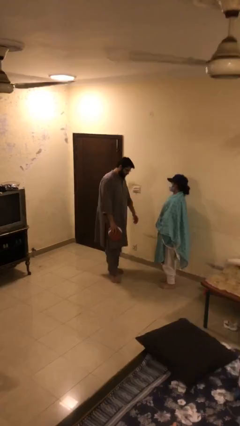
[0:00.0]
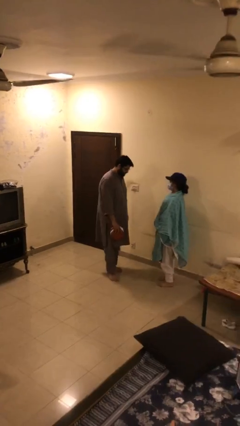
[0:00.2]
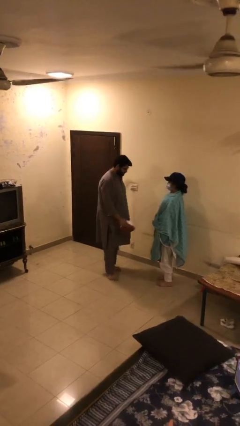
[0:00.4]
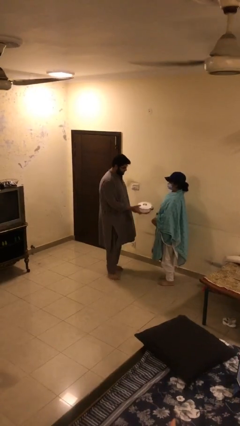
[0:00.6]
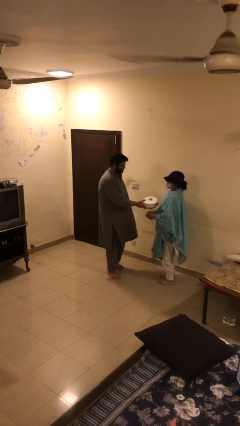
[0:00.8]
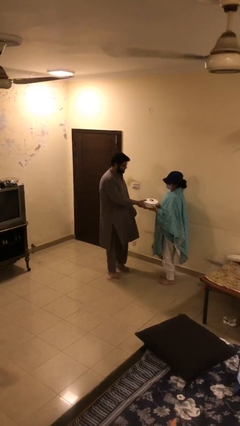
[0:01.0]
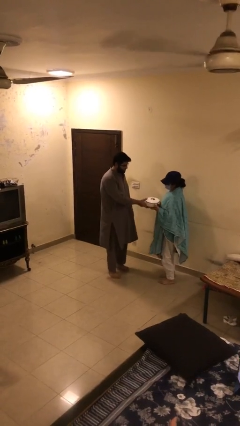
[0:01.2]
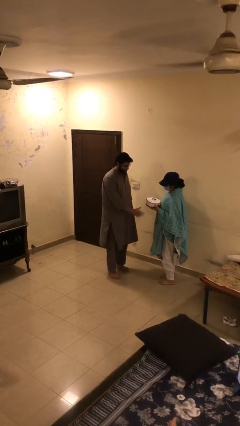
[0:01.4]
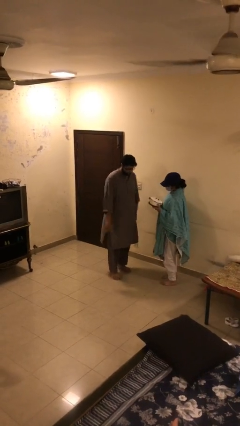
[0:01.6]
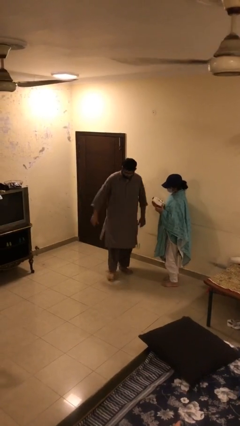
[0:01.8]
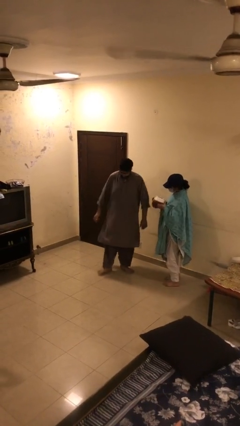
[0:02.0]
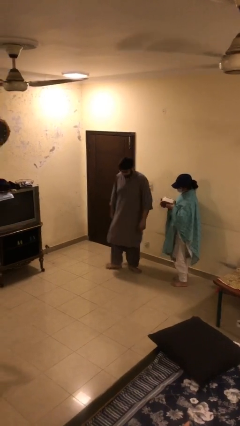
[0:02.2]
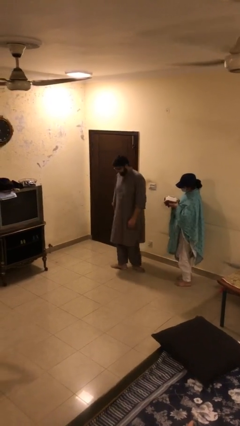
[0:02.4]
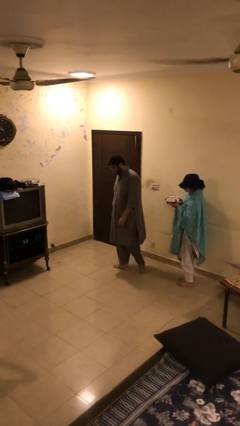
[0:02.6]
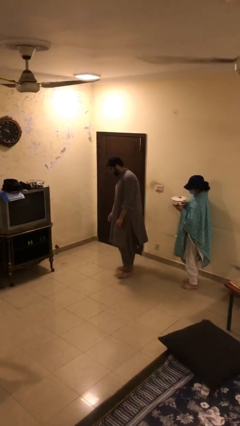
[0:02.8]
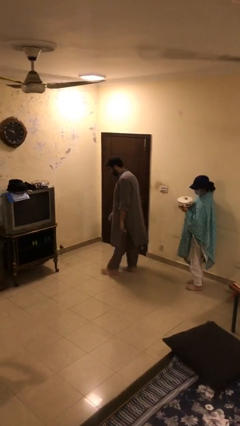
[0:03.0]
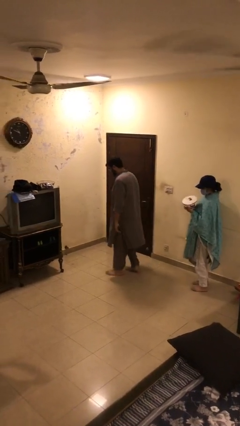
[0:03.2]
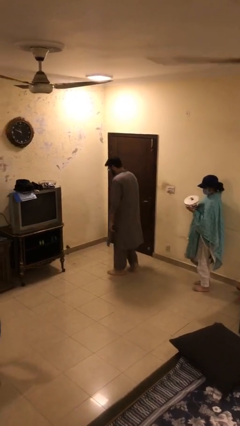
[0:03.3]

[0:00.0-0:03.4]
person transfers object to person

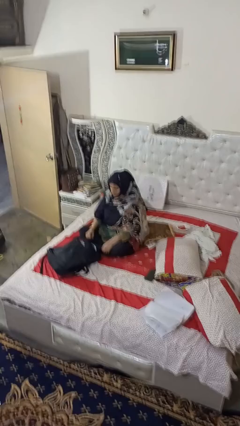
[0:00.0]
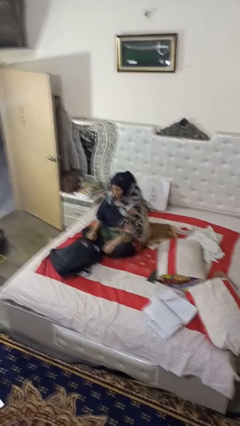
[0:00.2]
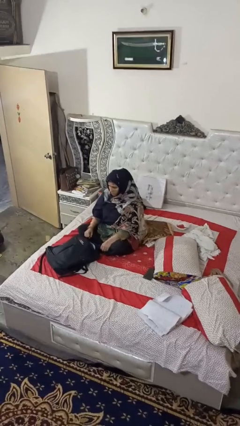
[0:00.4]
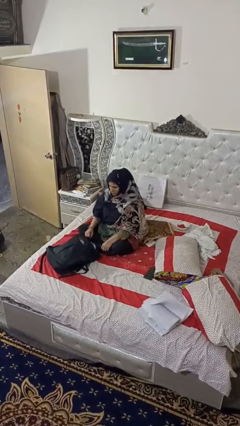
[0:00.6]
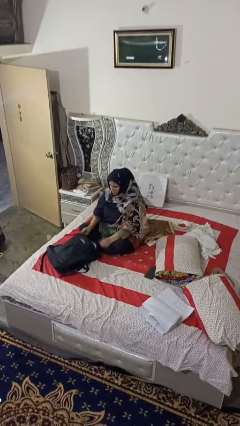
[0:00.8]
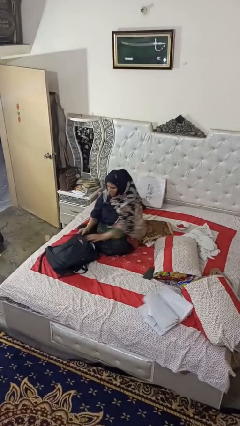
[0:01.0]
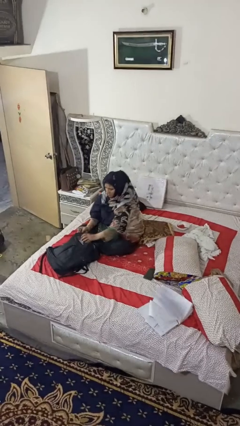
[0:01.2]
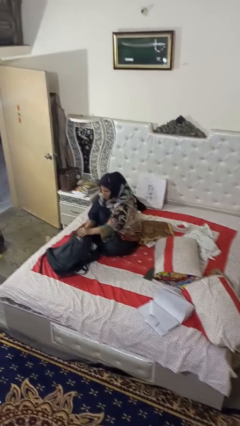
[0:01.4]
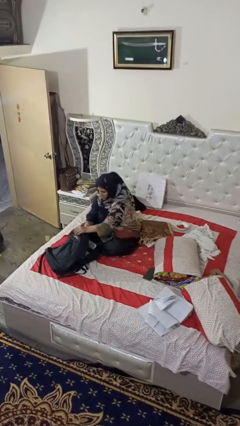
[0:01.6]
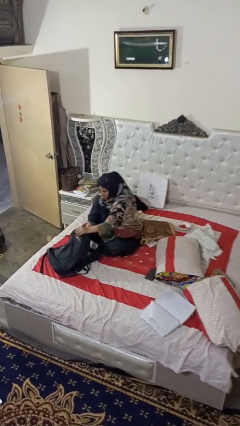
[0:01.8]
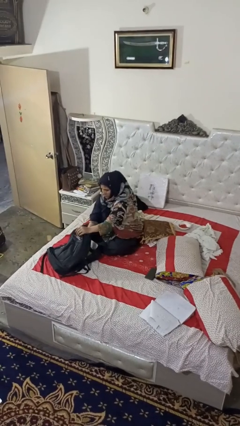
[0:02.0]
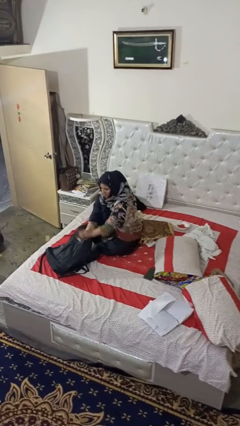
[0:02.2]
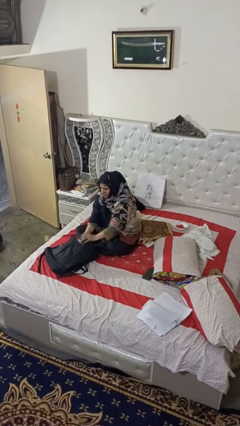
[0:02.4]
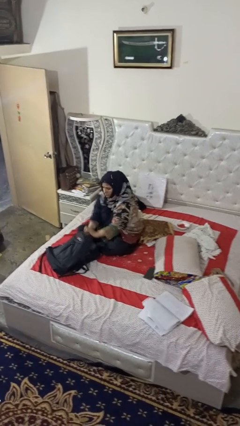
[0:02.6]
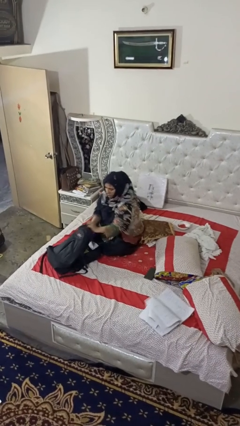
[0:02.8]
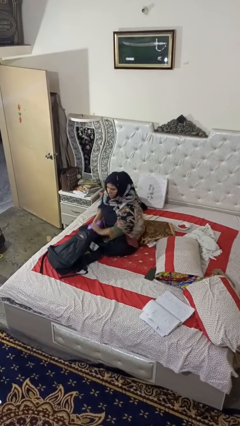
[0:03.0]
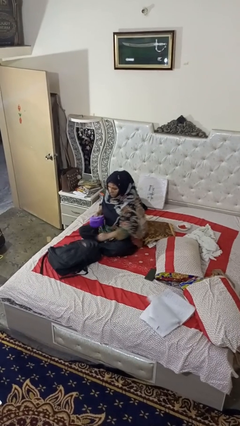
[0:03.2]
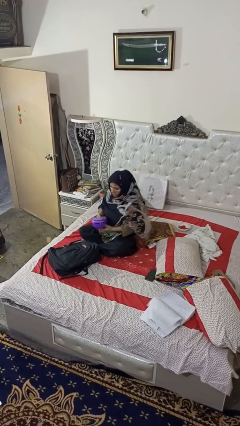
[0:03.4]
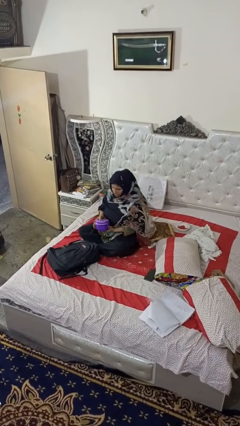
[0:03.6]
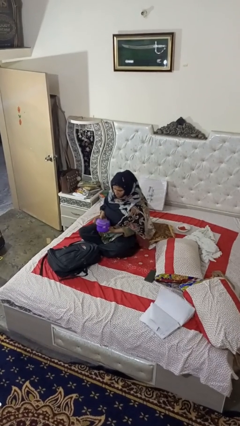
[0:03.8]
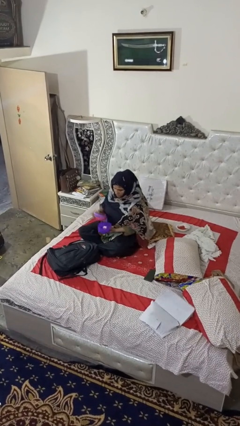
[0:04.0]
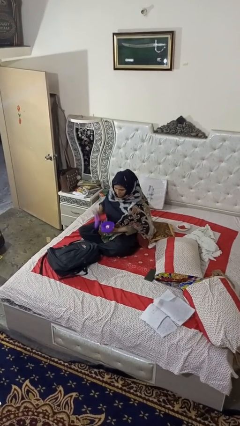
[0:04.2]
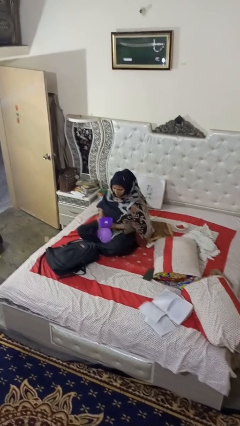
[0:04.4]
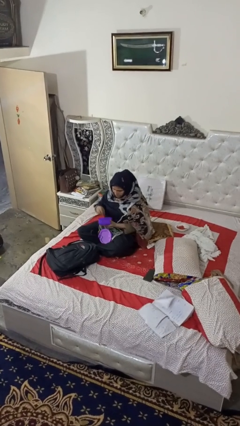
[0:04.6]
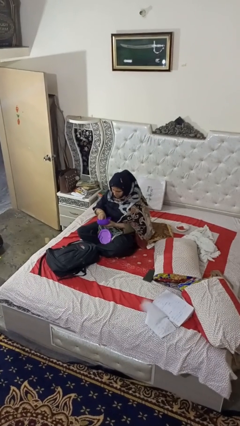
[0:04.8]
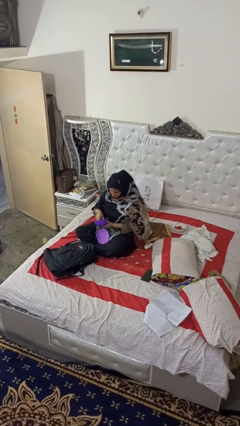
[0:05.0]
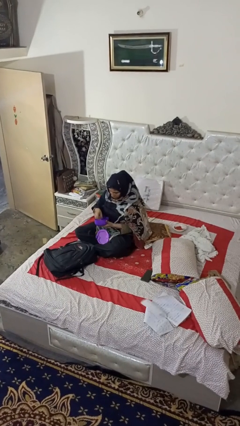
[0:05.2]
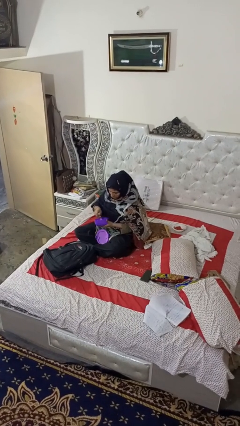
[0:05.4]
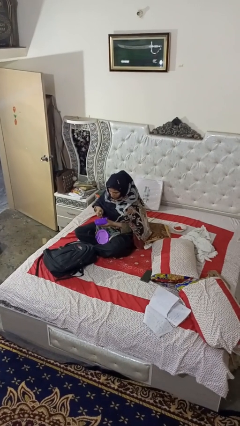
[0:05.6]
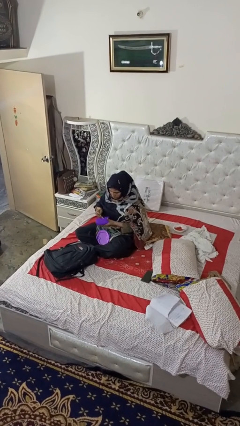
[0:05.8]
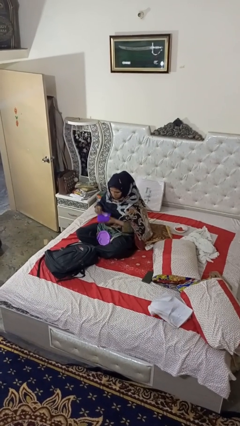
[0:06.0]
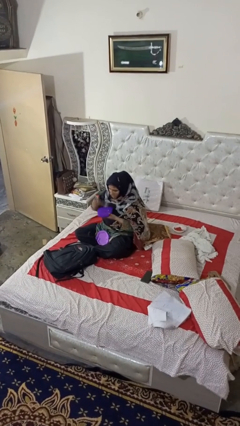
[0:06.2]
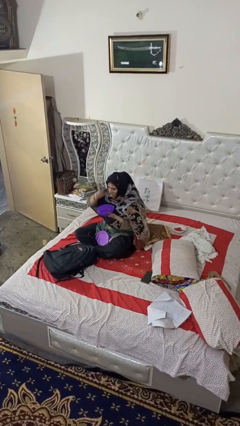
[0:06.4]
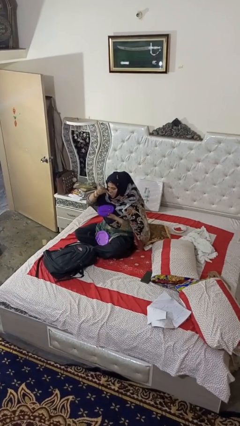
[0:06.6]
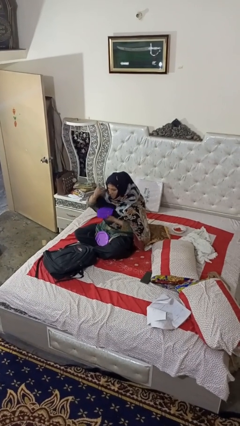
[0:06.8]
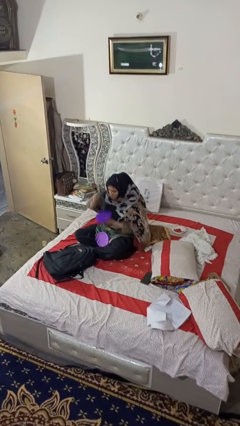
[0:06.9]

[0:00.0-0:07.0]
person eats snack from bag

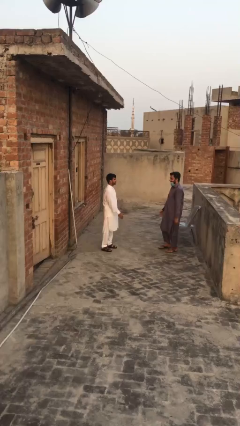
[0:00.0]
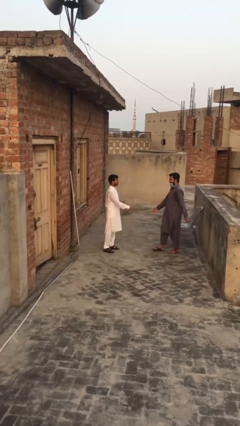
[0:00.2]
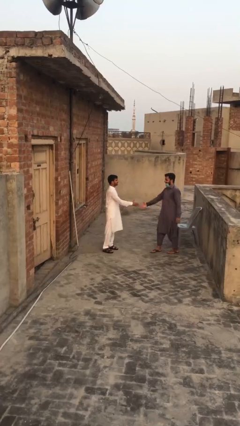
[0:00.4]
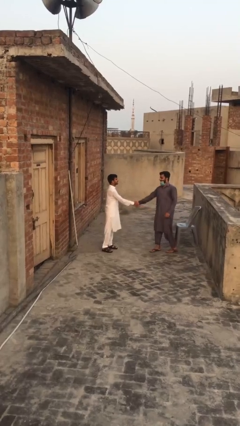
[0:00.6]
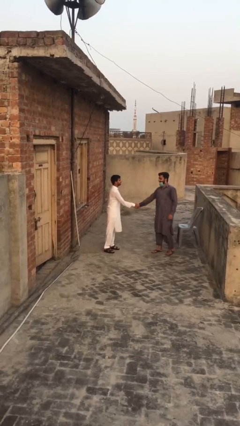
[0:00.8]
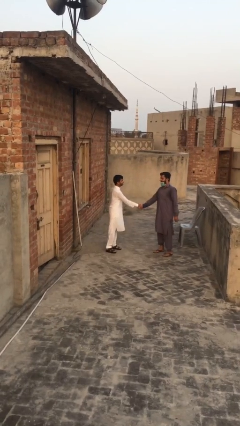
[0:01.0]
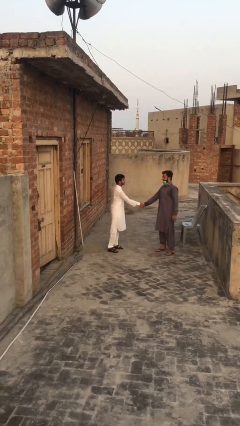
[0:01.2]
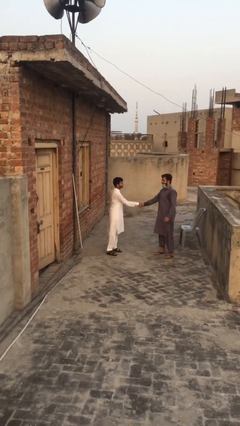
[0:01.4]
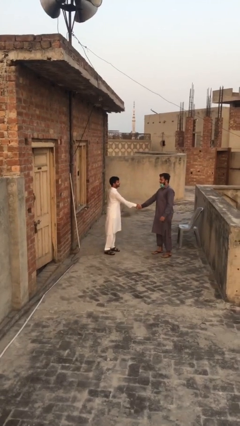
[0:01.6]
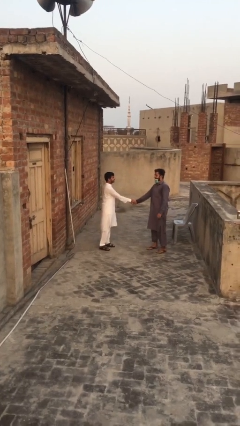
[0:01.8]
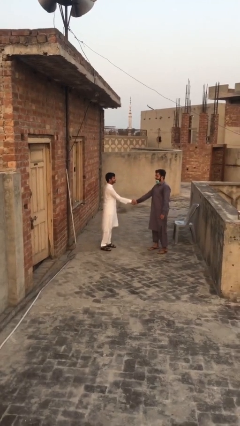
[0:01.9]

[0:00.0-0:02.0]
person shakes hand

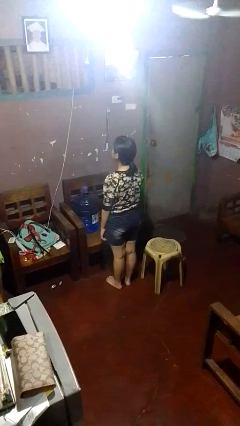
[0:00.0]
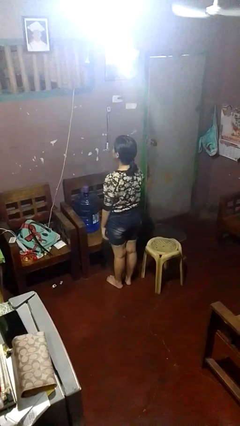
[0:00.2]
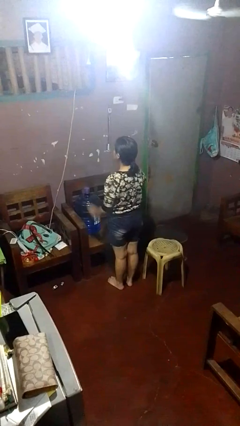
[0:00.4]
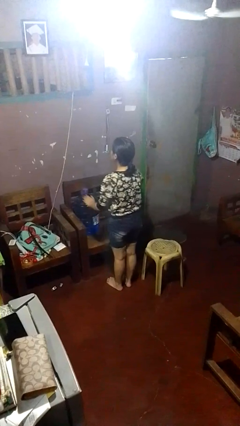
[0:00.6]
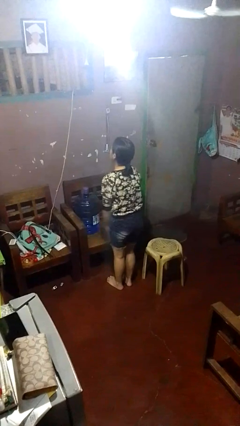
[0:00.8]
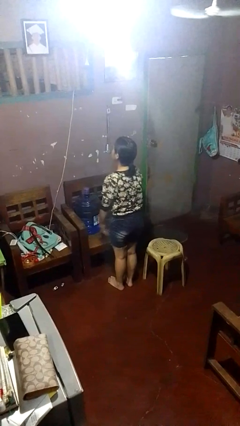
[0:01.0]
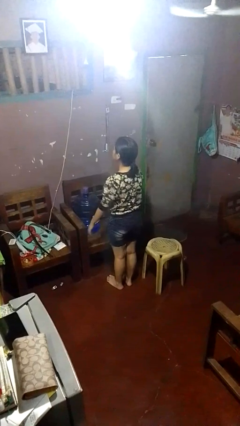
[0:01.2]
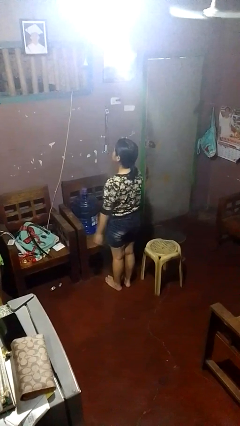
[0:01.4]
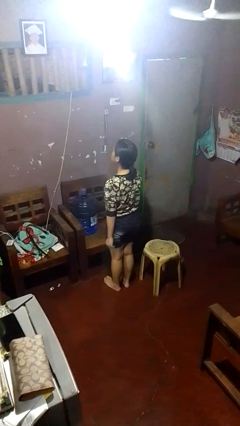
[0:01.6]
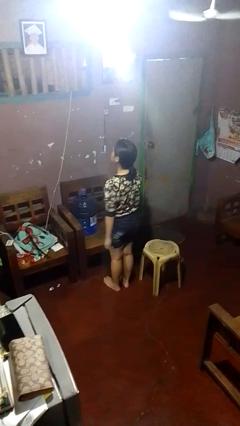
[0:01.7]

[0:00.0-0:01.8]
person slaps hands on thighs

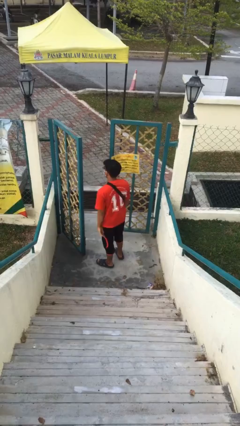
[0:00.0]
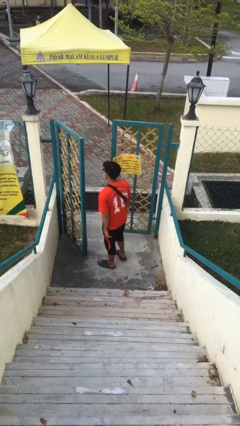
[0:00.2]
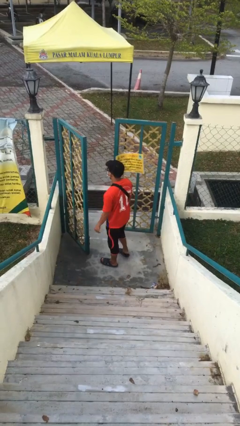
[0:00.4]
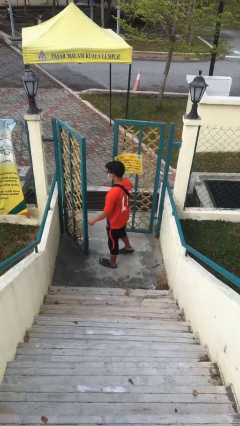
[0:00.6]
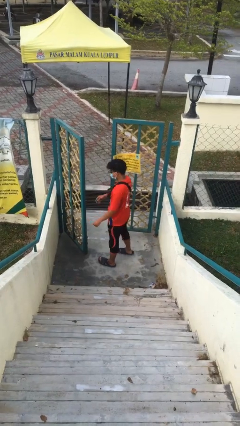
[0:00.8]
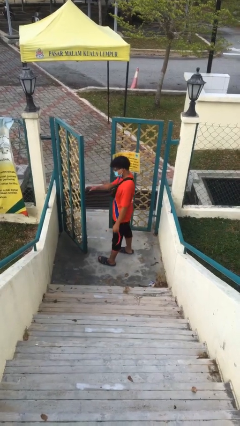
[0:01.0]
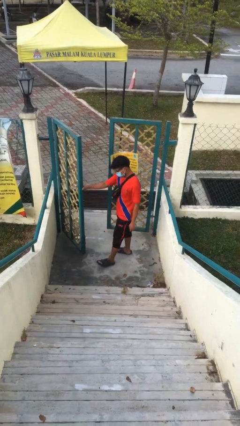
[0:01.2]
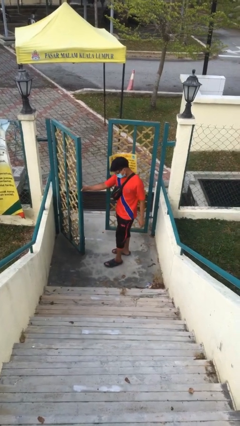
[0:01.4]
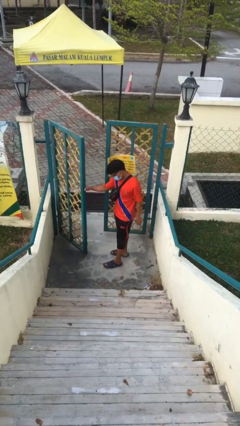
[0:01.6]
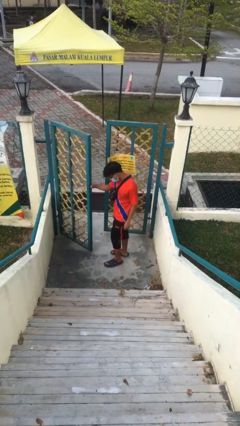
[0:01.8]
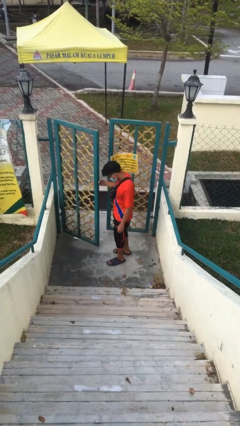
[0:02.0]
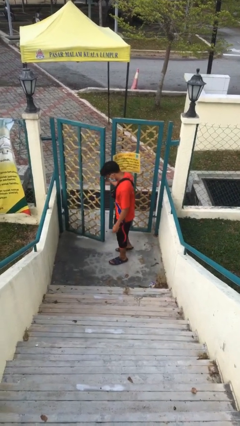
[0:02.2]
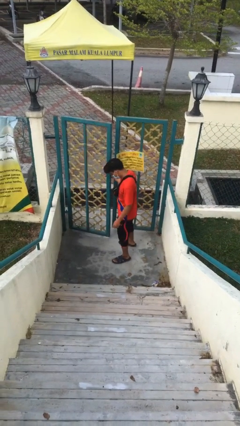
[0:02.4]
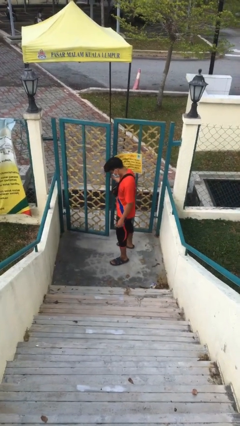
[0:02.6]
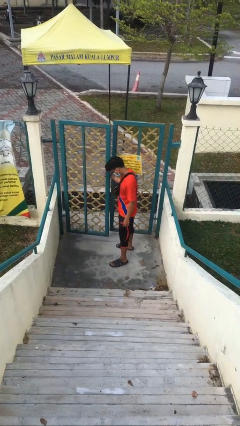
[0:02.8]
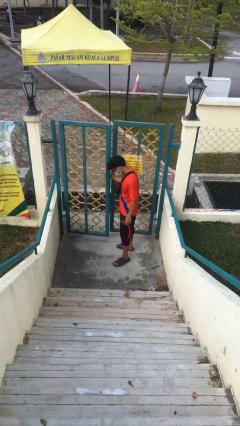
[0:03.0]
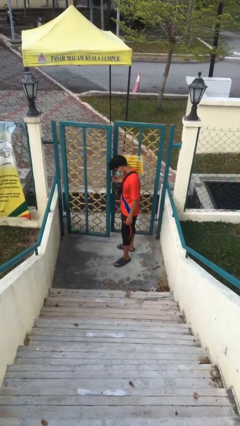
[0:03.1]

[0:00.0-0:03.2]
person closes facility door
